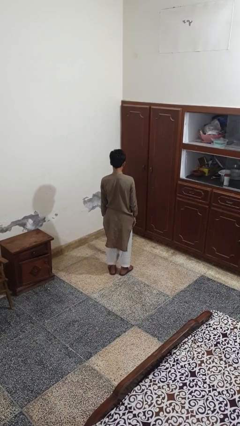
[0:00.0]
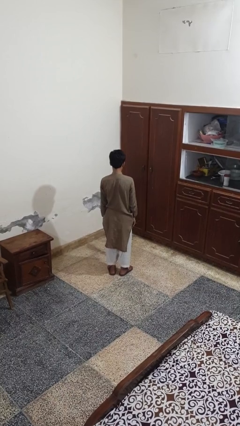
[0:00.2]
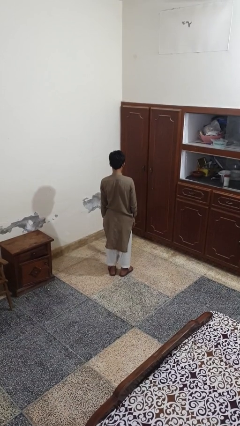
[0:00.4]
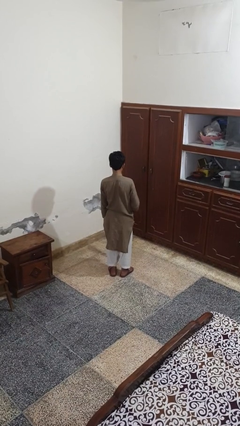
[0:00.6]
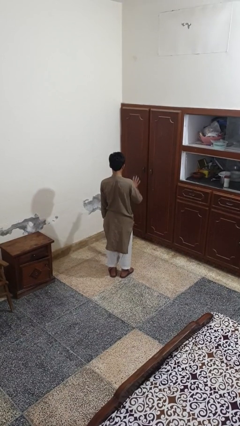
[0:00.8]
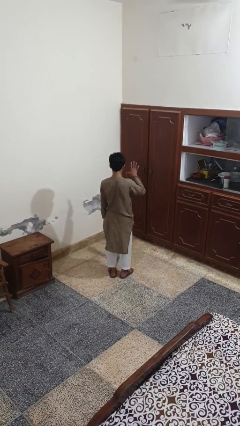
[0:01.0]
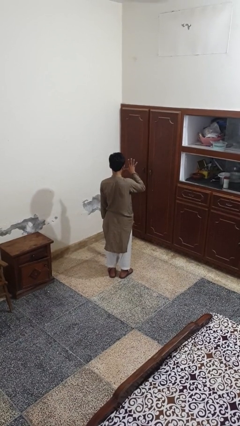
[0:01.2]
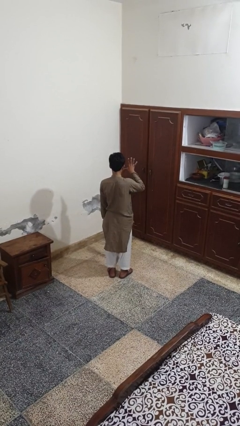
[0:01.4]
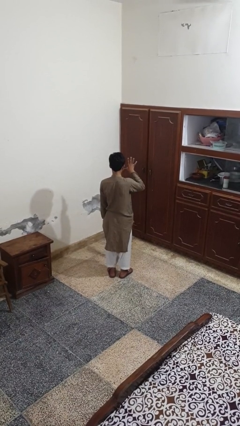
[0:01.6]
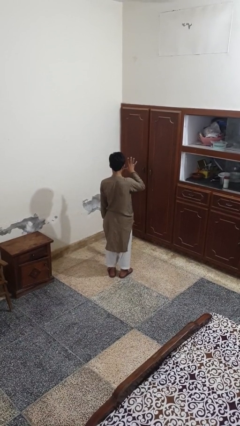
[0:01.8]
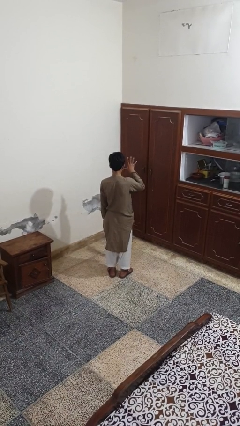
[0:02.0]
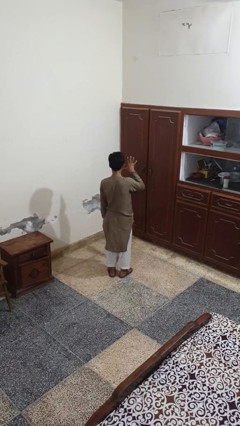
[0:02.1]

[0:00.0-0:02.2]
person gestures number five

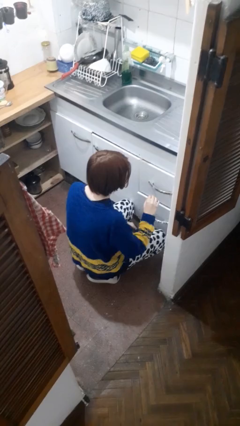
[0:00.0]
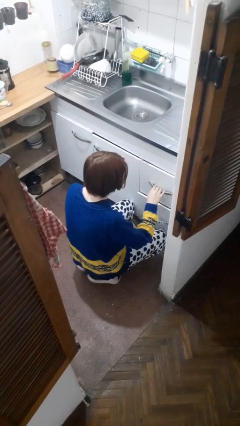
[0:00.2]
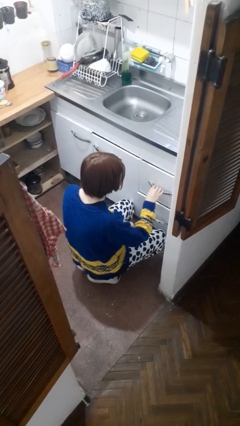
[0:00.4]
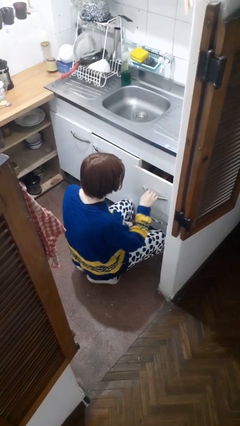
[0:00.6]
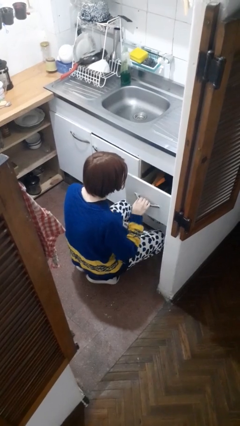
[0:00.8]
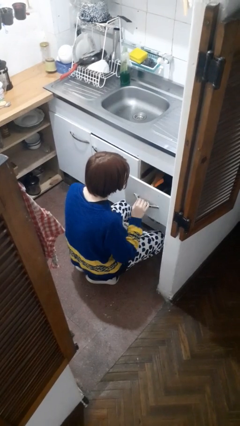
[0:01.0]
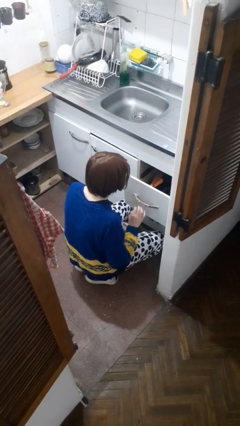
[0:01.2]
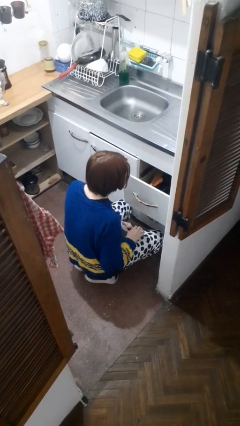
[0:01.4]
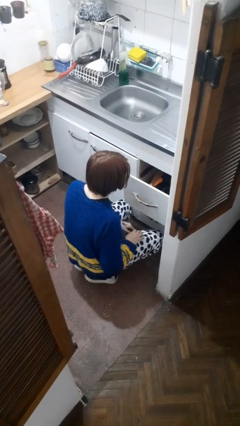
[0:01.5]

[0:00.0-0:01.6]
person opens kitchen drawer

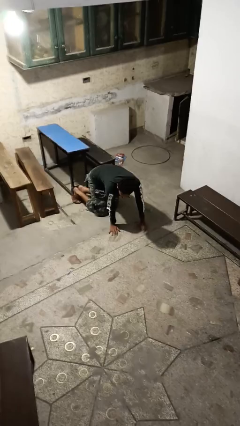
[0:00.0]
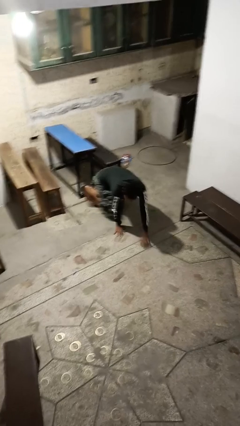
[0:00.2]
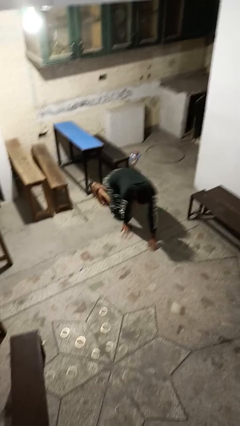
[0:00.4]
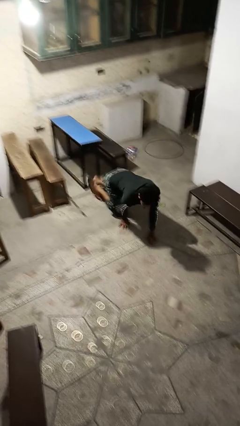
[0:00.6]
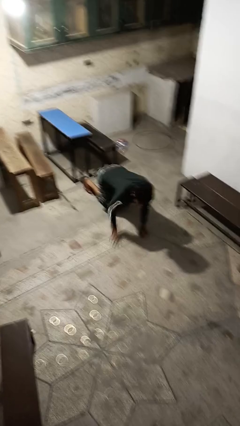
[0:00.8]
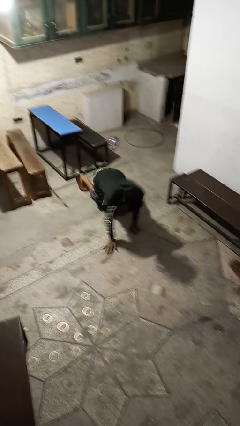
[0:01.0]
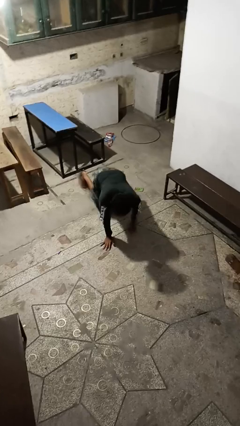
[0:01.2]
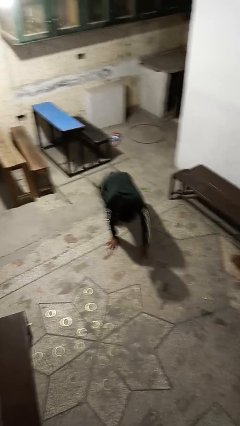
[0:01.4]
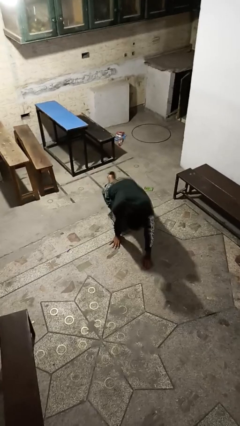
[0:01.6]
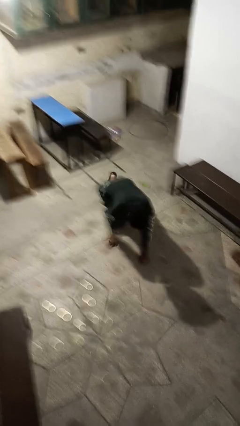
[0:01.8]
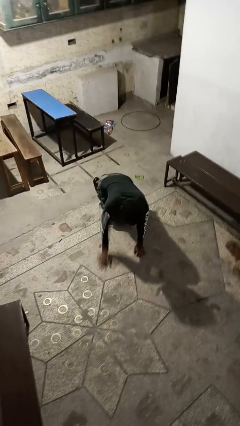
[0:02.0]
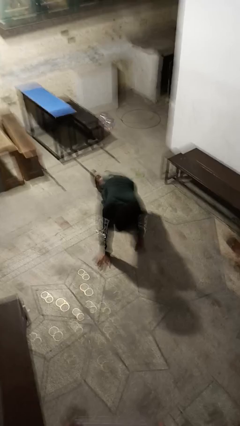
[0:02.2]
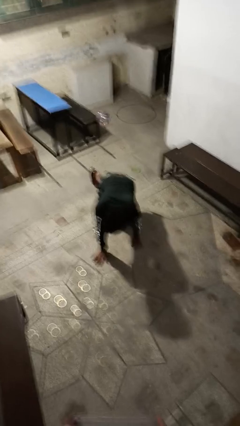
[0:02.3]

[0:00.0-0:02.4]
person crawls

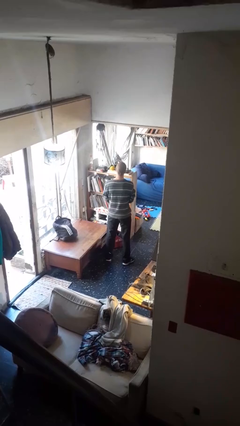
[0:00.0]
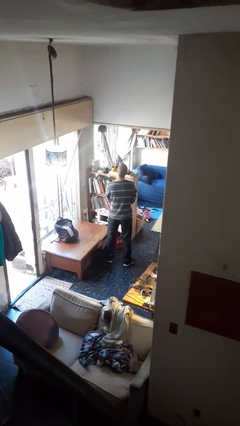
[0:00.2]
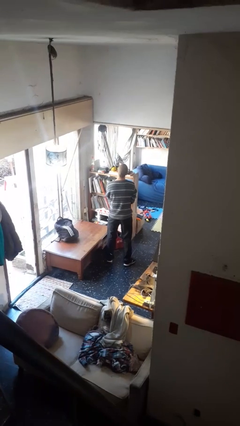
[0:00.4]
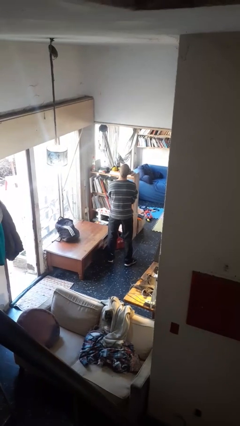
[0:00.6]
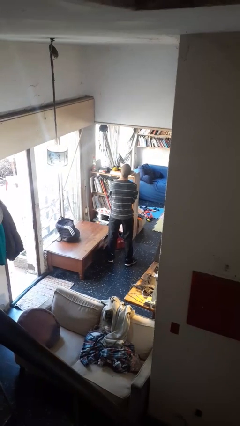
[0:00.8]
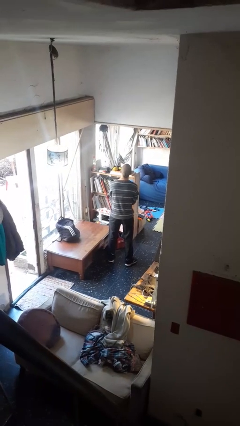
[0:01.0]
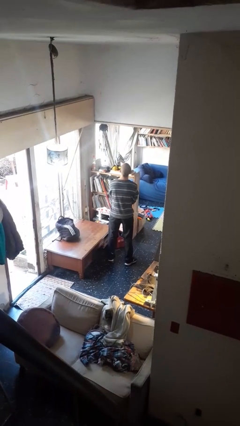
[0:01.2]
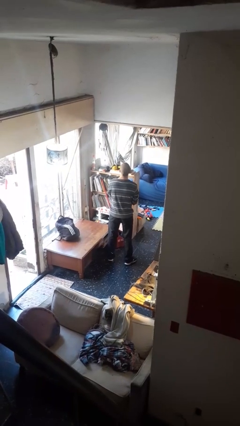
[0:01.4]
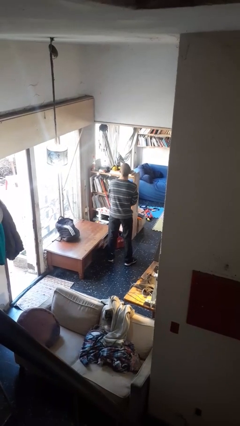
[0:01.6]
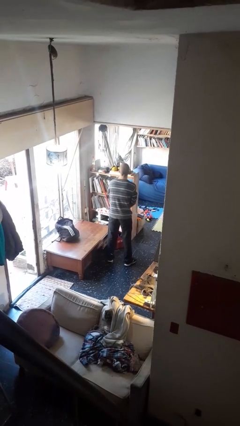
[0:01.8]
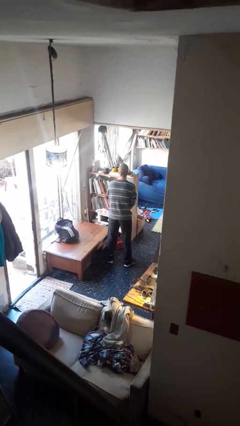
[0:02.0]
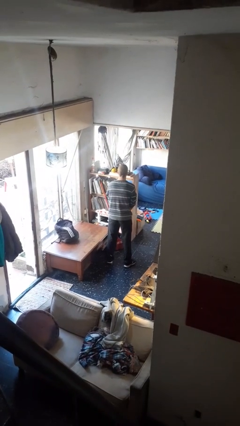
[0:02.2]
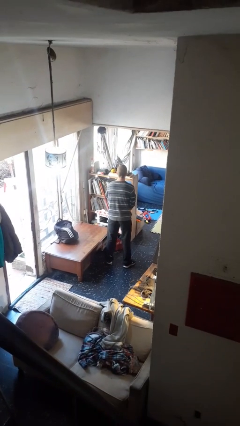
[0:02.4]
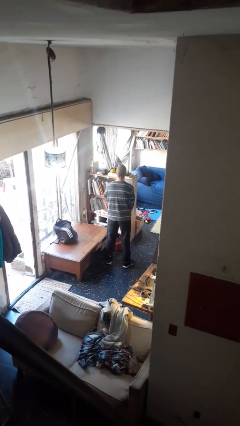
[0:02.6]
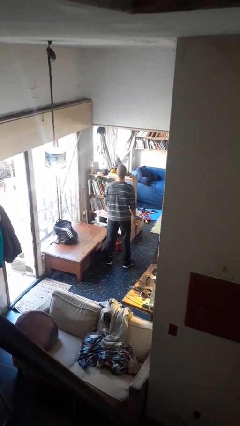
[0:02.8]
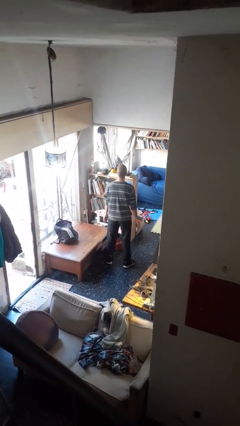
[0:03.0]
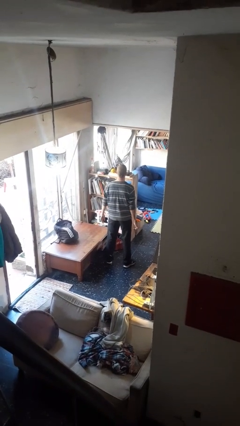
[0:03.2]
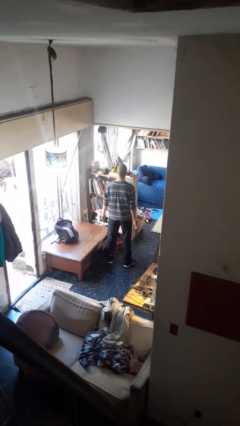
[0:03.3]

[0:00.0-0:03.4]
person takes off wristwatch

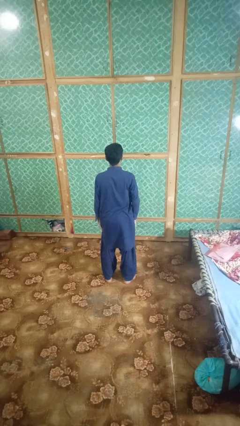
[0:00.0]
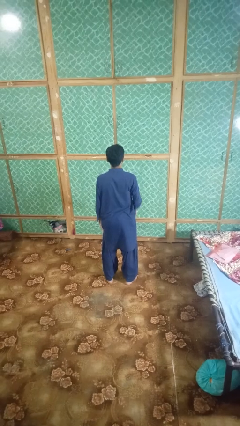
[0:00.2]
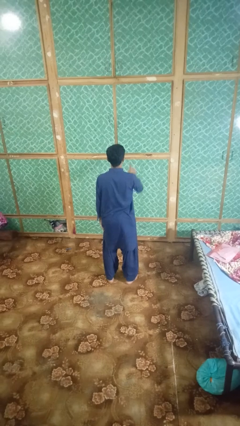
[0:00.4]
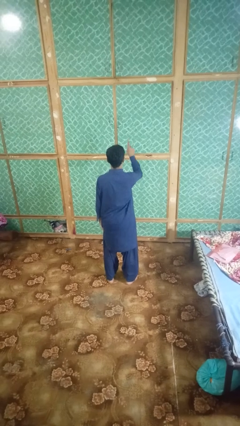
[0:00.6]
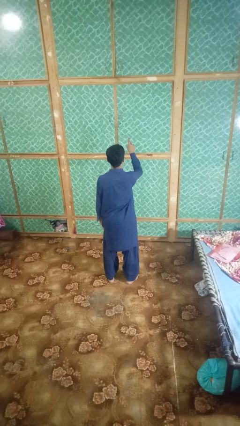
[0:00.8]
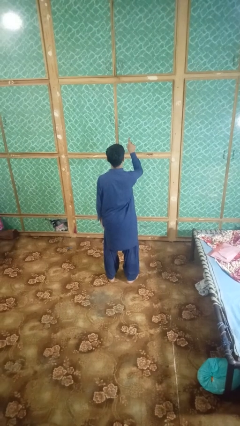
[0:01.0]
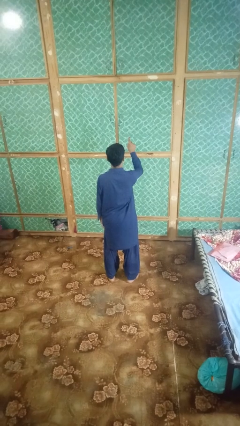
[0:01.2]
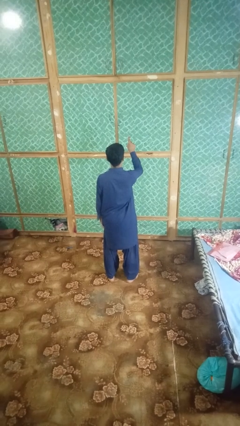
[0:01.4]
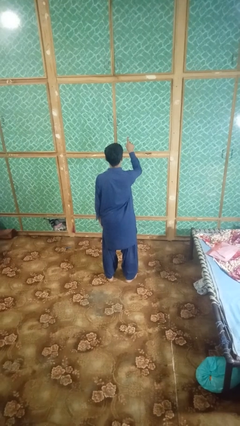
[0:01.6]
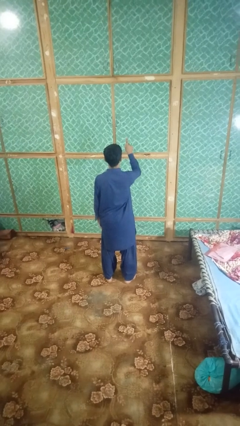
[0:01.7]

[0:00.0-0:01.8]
person gestures number one

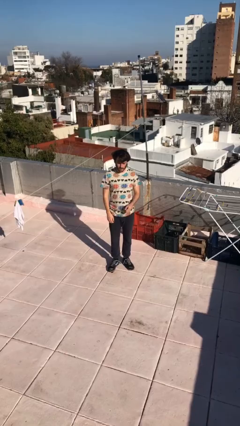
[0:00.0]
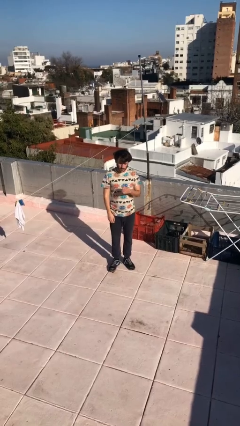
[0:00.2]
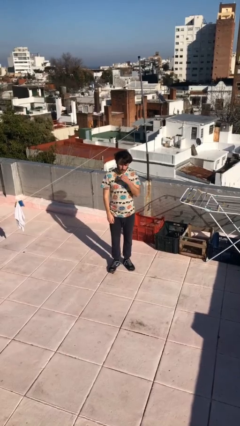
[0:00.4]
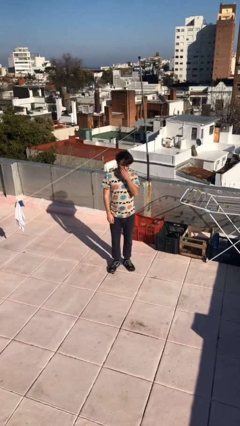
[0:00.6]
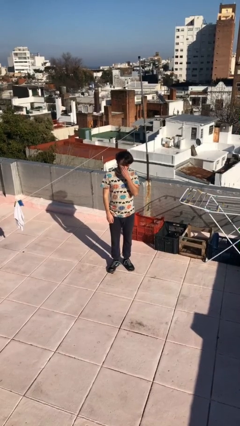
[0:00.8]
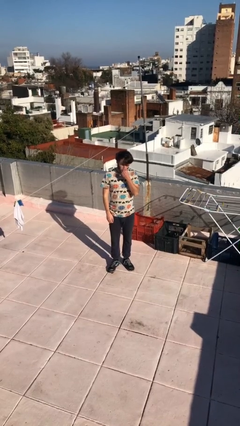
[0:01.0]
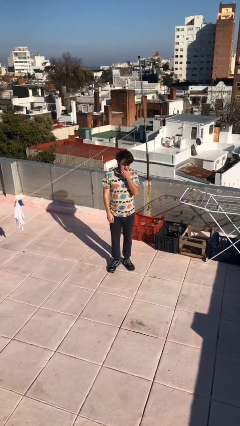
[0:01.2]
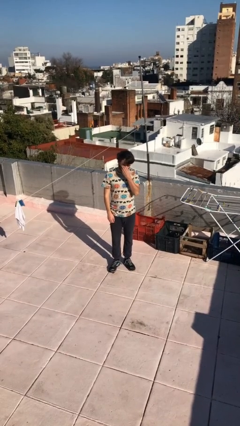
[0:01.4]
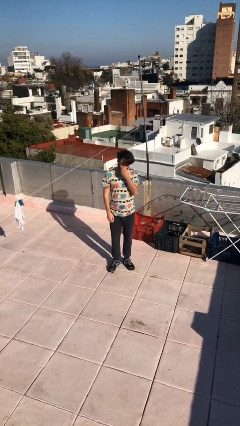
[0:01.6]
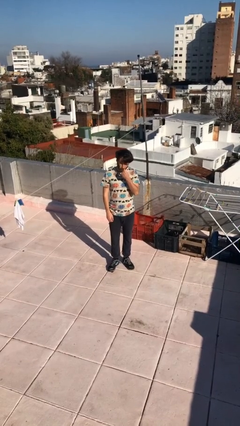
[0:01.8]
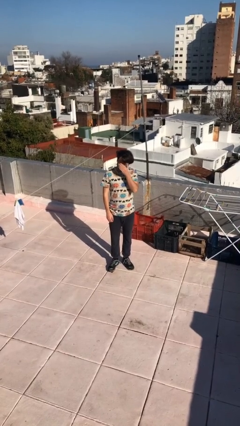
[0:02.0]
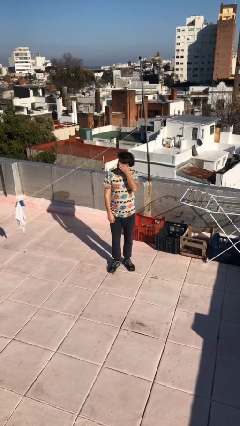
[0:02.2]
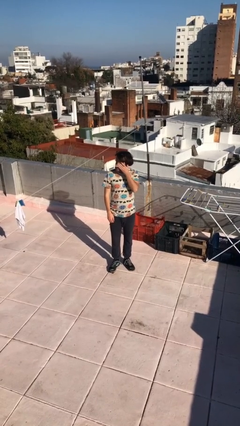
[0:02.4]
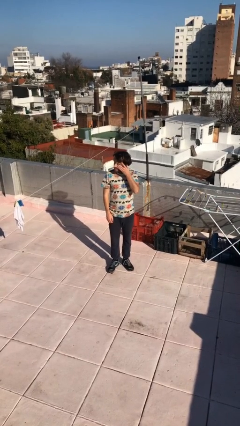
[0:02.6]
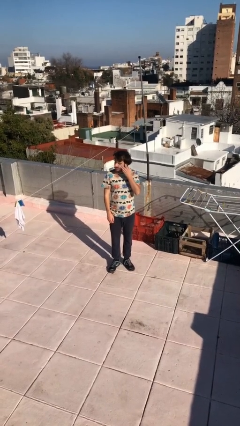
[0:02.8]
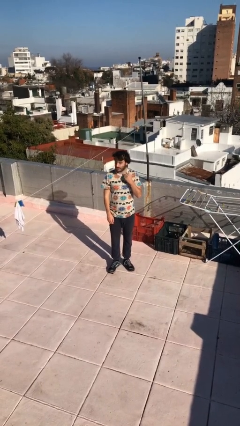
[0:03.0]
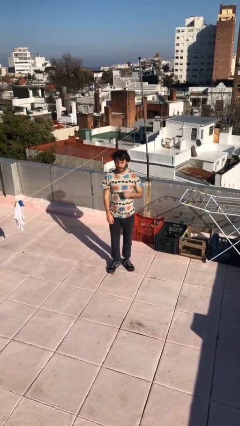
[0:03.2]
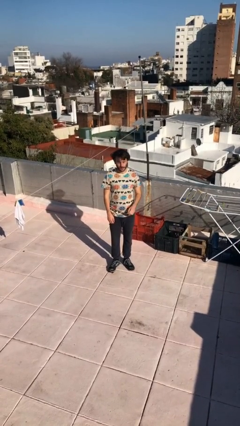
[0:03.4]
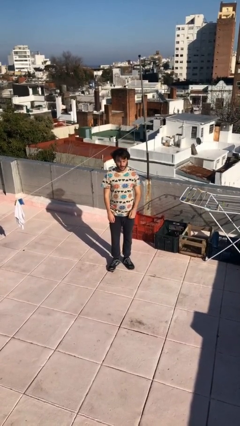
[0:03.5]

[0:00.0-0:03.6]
person scratches face

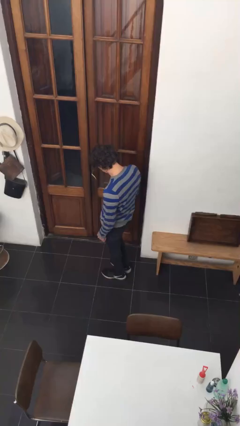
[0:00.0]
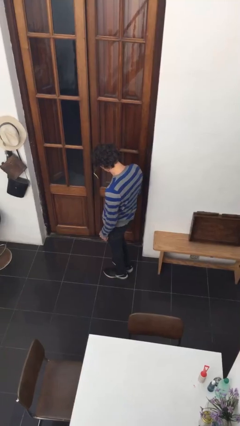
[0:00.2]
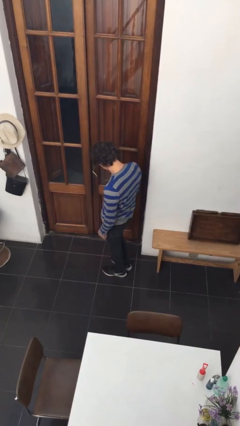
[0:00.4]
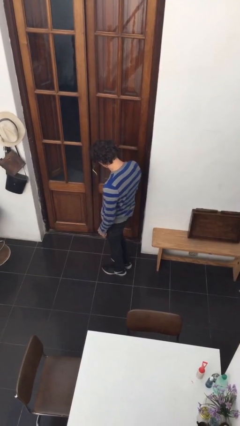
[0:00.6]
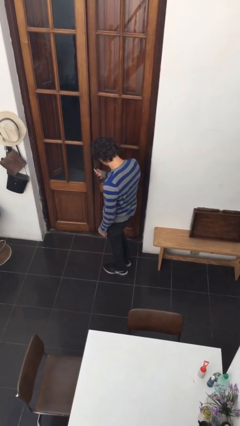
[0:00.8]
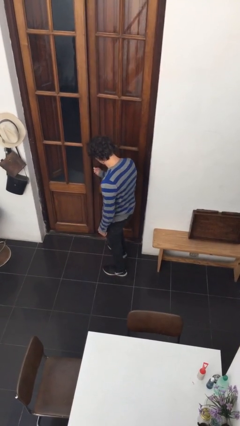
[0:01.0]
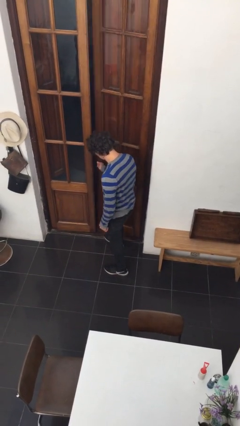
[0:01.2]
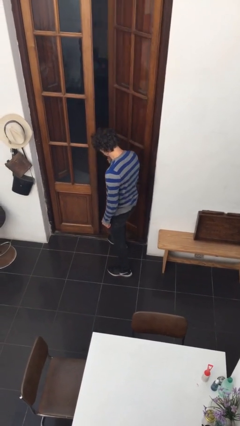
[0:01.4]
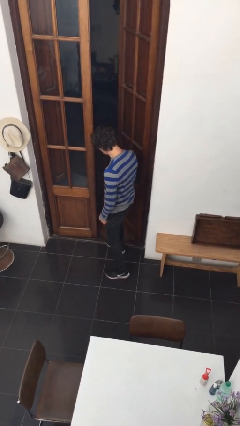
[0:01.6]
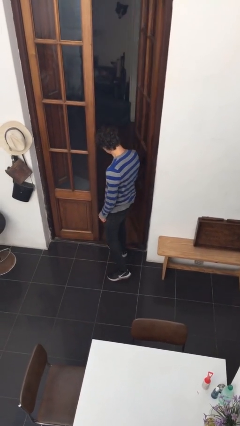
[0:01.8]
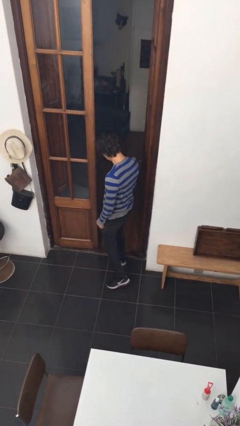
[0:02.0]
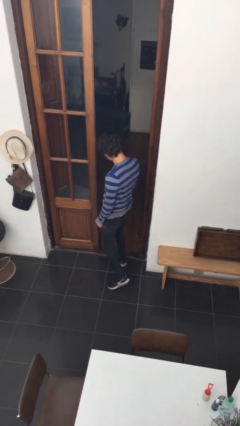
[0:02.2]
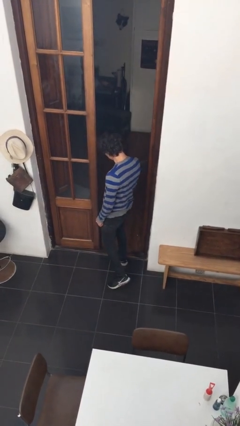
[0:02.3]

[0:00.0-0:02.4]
person opens facility door
